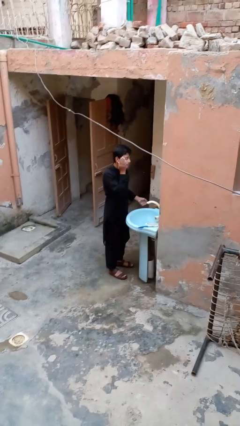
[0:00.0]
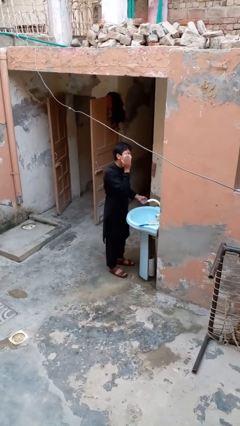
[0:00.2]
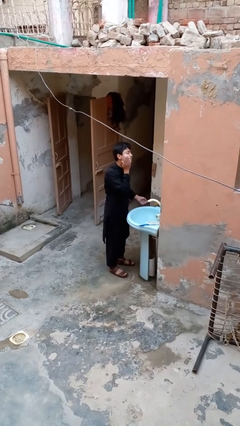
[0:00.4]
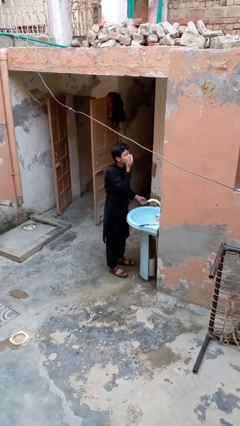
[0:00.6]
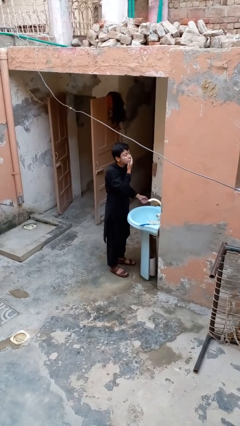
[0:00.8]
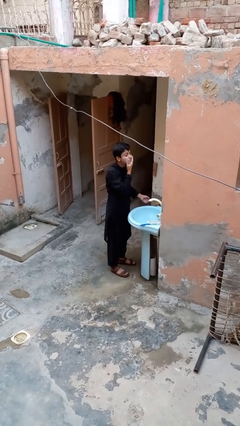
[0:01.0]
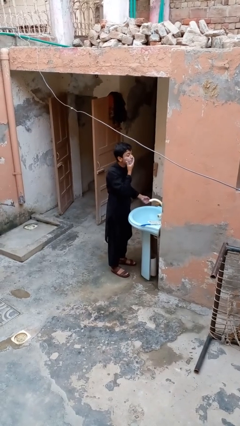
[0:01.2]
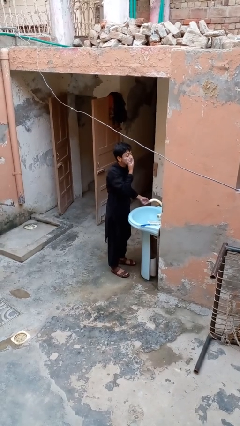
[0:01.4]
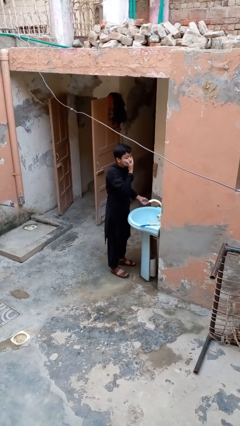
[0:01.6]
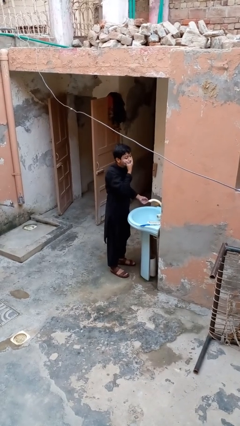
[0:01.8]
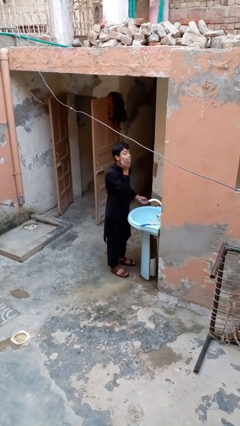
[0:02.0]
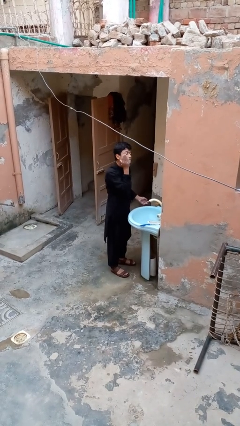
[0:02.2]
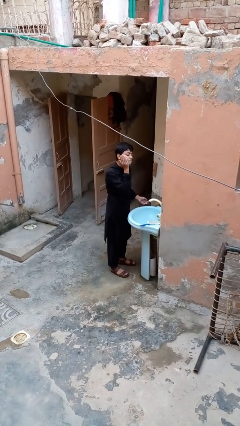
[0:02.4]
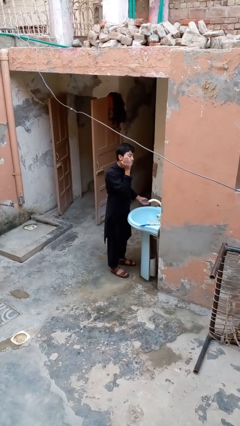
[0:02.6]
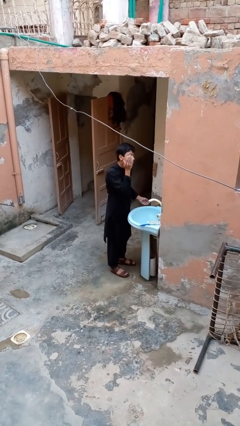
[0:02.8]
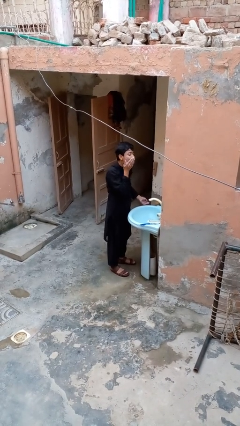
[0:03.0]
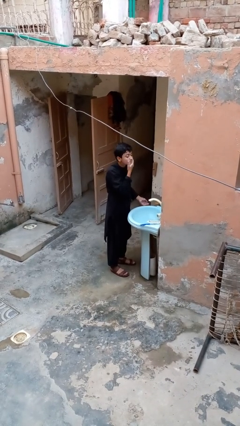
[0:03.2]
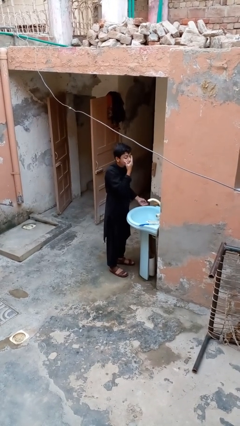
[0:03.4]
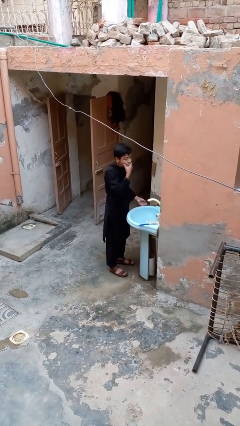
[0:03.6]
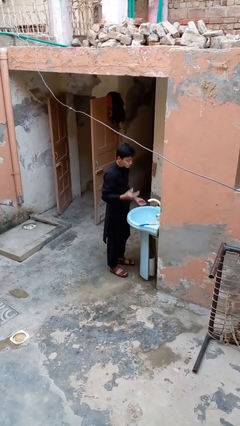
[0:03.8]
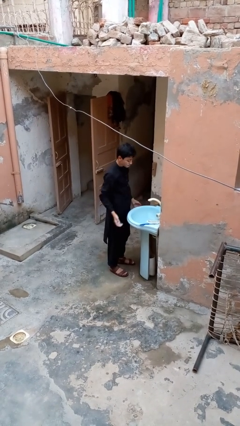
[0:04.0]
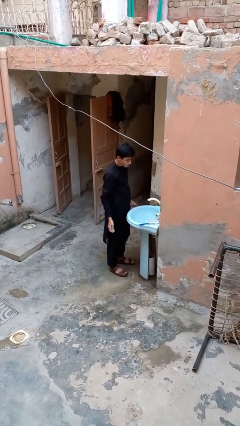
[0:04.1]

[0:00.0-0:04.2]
person applies shaving cream

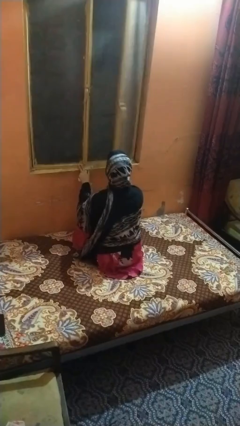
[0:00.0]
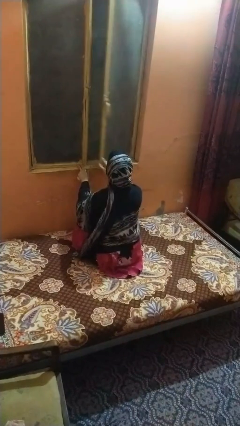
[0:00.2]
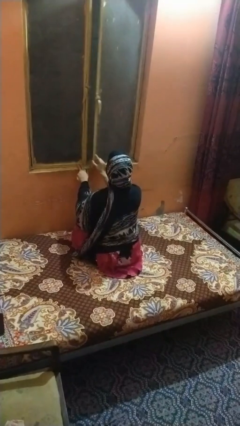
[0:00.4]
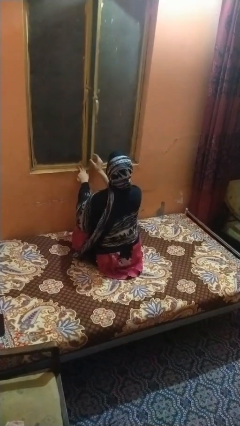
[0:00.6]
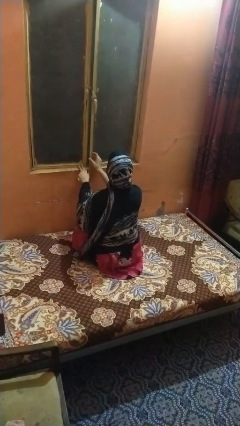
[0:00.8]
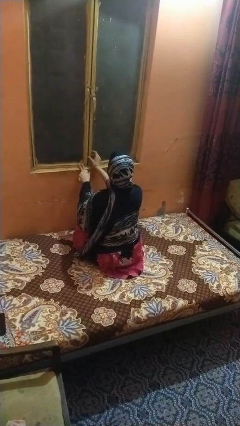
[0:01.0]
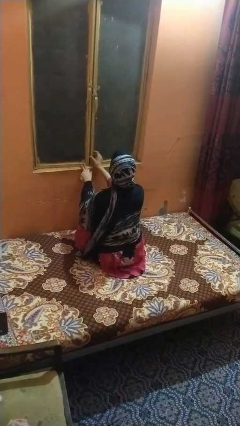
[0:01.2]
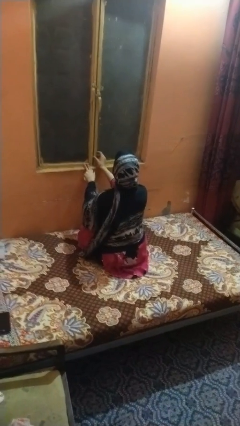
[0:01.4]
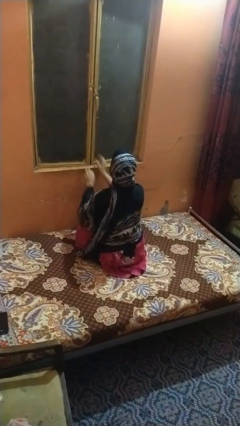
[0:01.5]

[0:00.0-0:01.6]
person closes home window

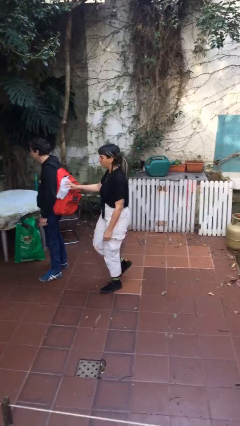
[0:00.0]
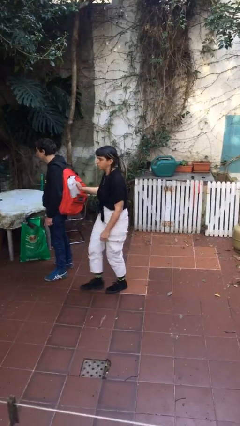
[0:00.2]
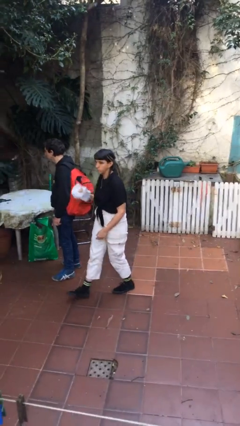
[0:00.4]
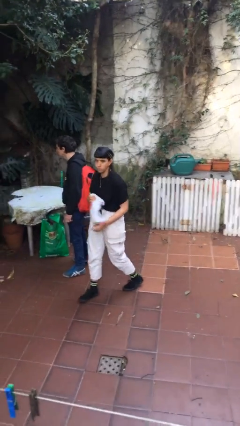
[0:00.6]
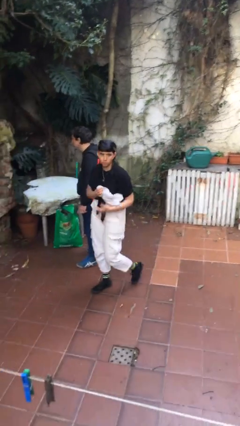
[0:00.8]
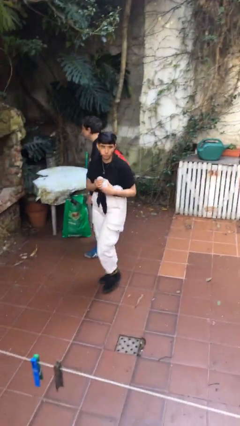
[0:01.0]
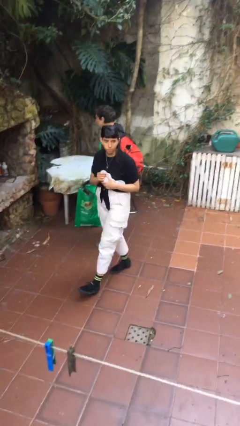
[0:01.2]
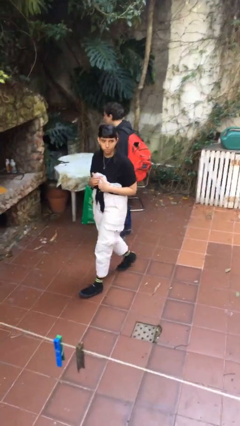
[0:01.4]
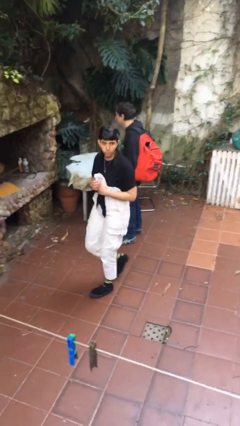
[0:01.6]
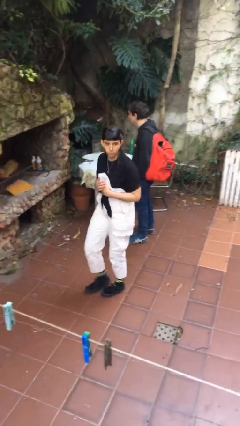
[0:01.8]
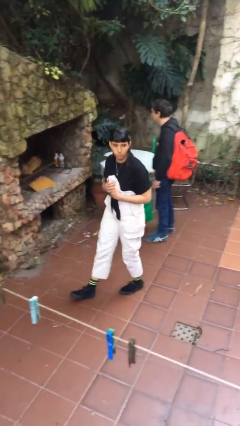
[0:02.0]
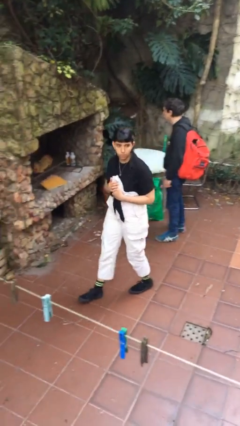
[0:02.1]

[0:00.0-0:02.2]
person steals object from person

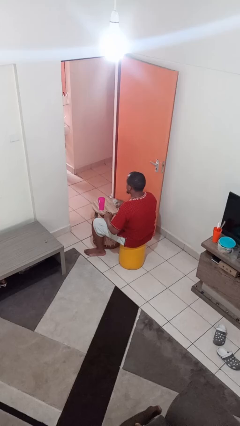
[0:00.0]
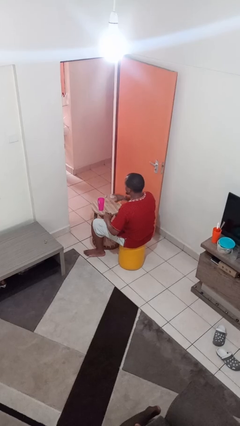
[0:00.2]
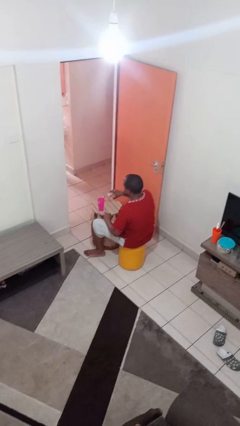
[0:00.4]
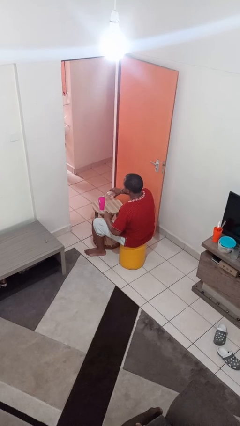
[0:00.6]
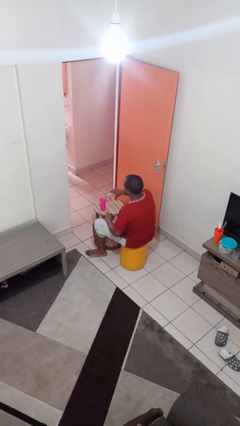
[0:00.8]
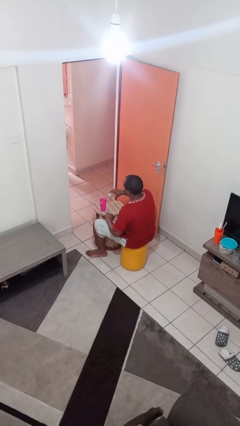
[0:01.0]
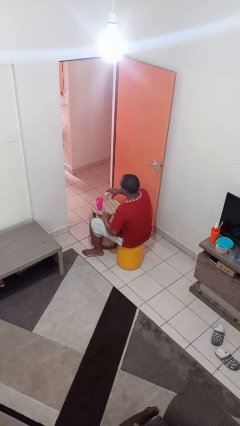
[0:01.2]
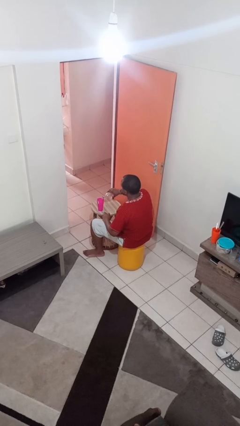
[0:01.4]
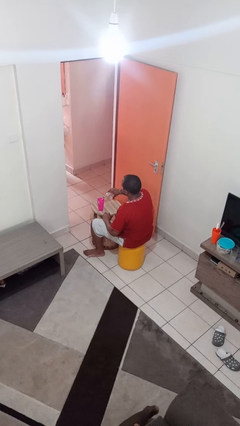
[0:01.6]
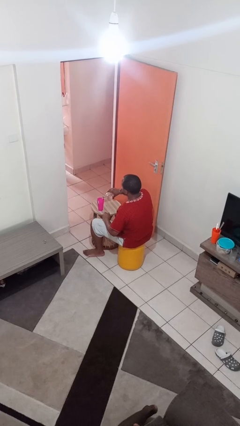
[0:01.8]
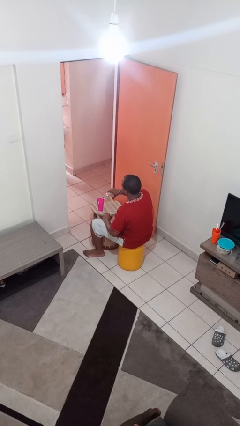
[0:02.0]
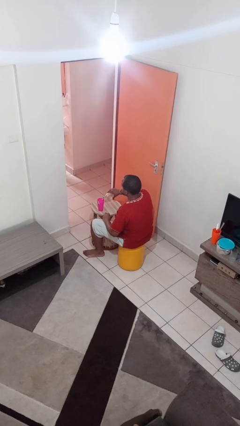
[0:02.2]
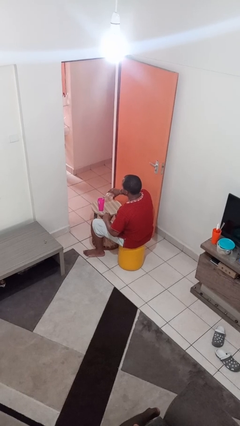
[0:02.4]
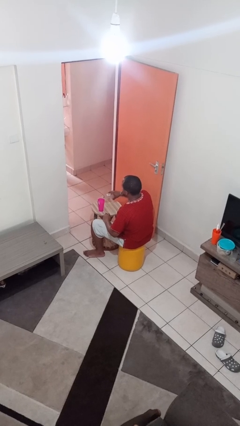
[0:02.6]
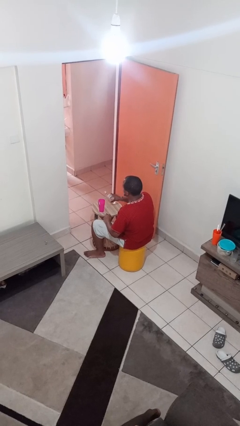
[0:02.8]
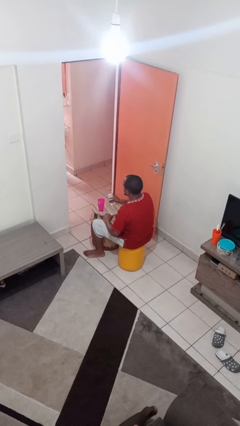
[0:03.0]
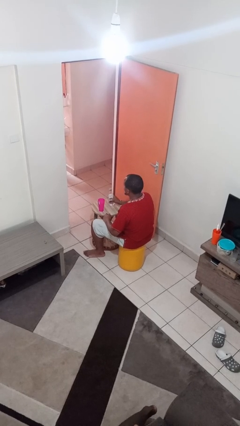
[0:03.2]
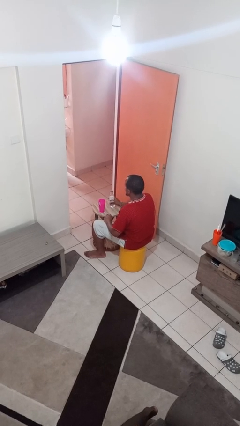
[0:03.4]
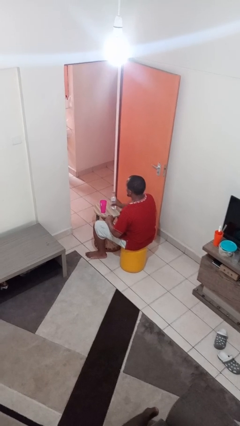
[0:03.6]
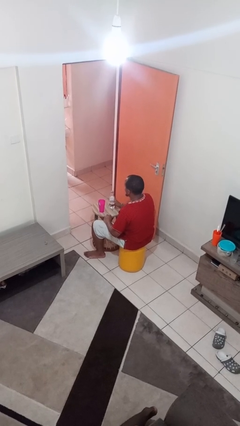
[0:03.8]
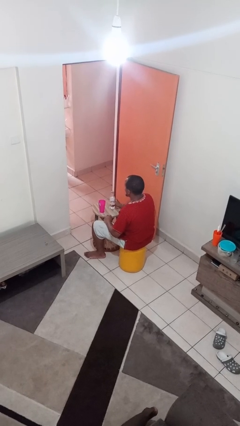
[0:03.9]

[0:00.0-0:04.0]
person pours liquid into cup

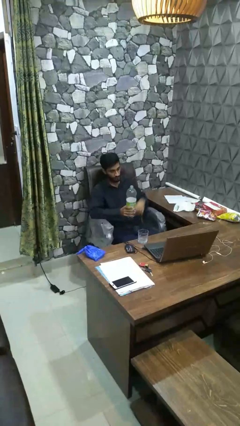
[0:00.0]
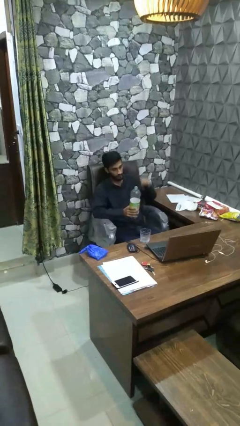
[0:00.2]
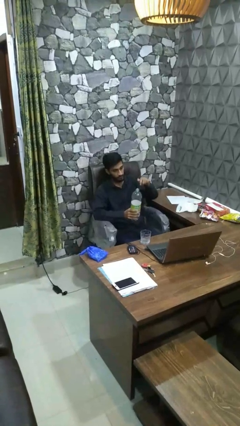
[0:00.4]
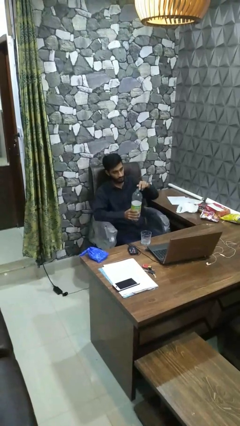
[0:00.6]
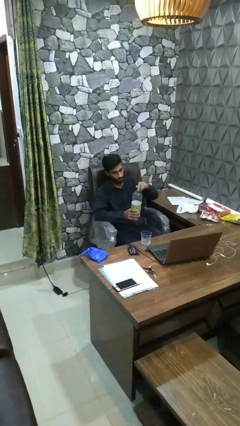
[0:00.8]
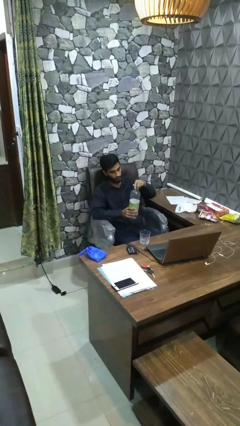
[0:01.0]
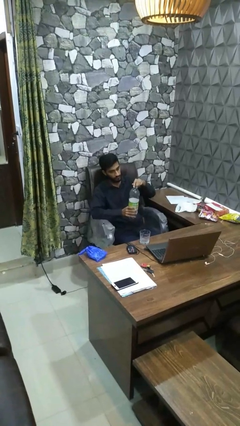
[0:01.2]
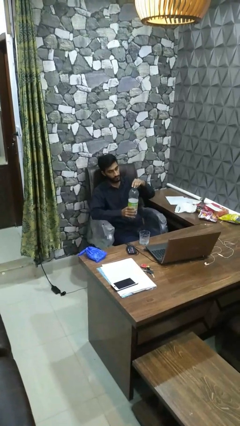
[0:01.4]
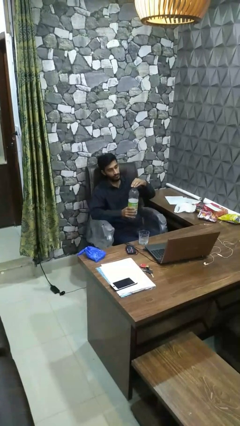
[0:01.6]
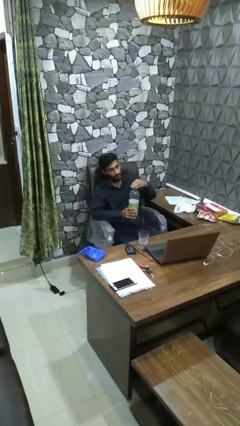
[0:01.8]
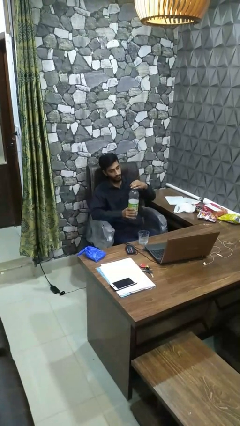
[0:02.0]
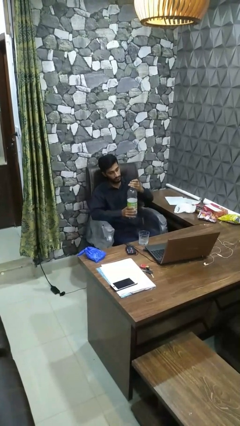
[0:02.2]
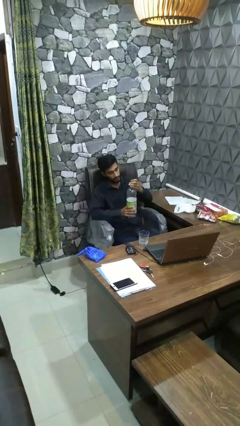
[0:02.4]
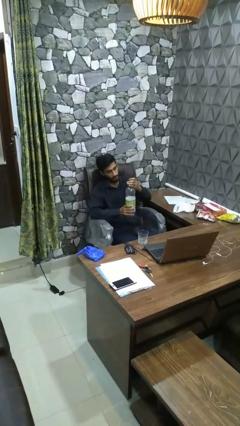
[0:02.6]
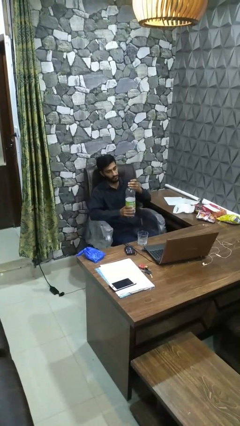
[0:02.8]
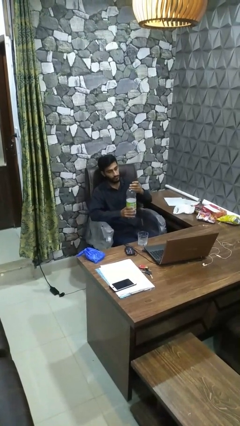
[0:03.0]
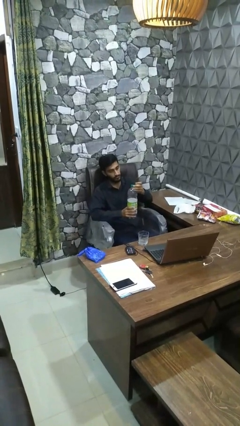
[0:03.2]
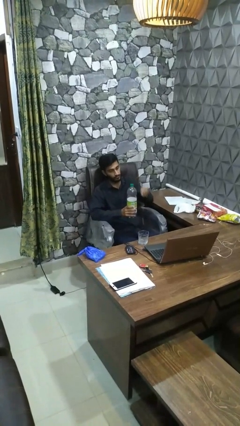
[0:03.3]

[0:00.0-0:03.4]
person screws lid to bottle

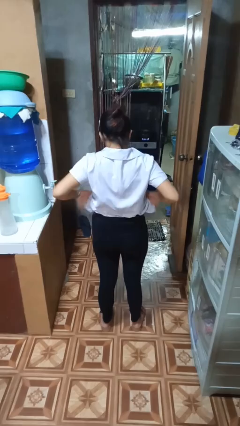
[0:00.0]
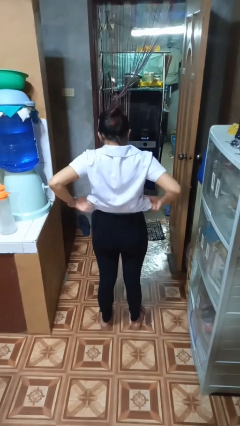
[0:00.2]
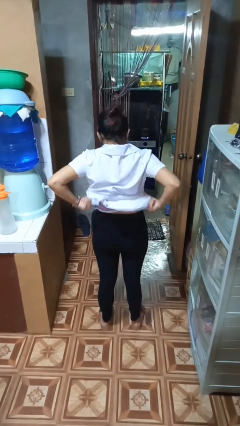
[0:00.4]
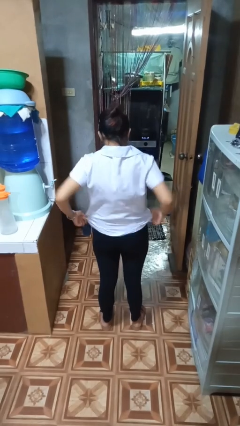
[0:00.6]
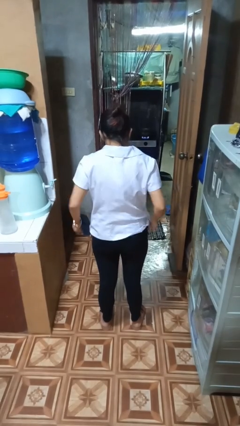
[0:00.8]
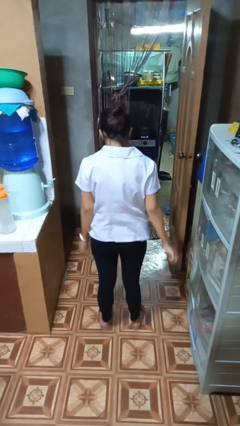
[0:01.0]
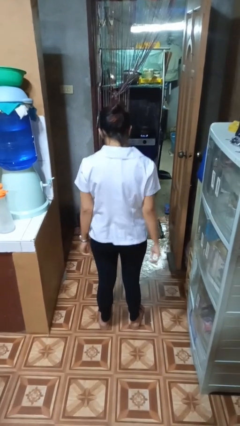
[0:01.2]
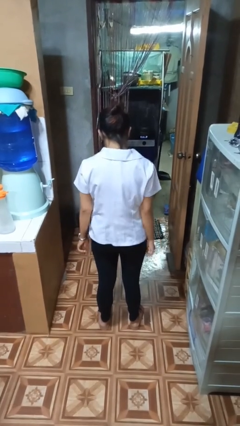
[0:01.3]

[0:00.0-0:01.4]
person untucks shirt

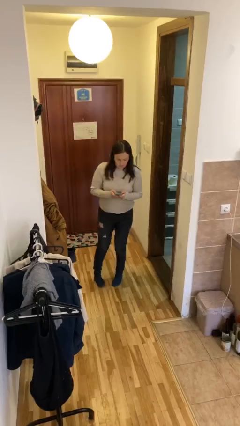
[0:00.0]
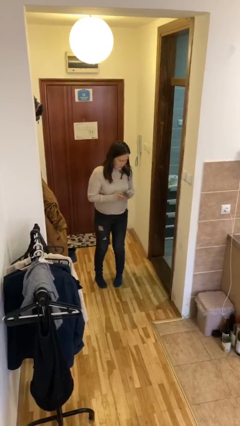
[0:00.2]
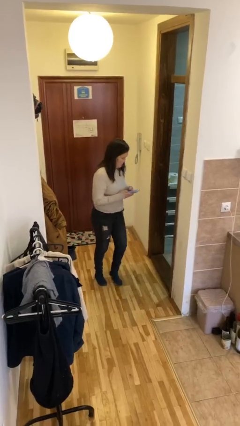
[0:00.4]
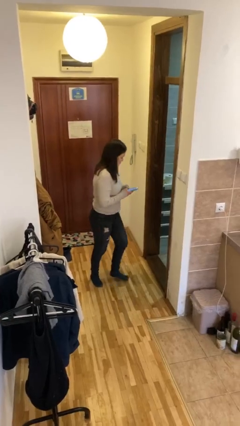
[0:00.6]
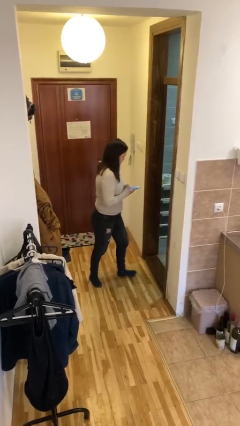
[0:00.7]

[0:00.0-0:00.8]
person exits scene through structure
